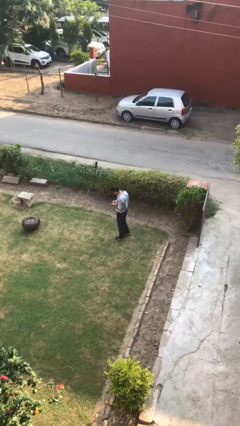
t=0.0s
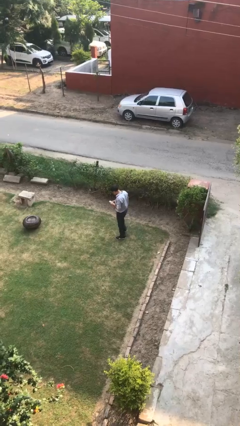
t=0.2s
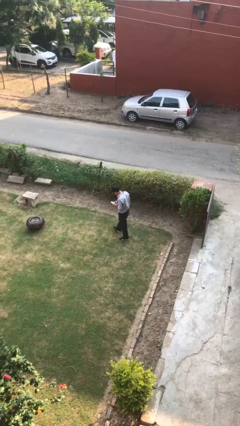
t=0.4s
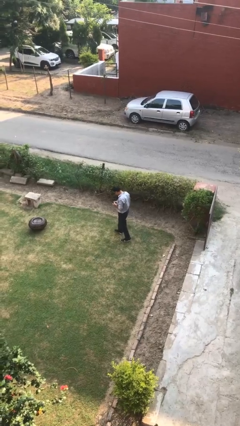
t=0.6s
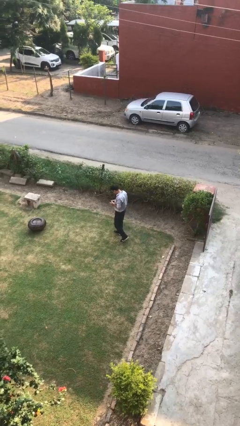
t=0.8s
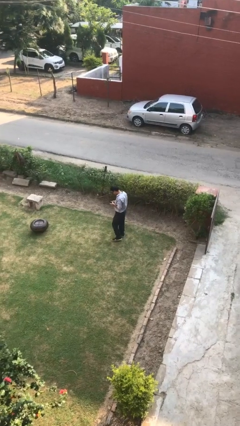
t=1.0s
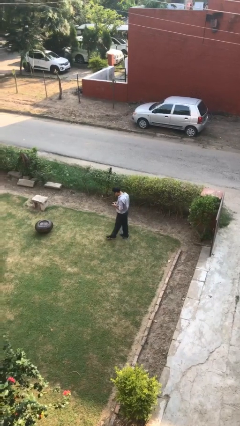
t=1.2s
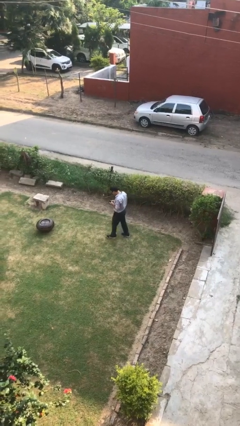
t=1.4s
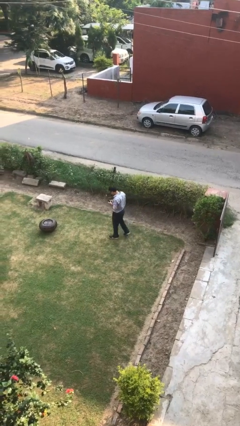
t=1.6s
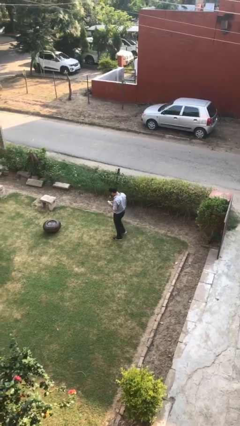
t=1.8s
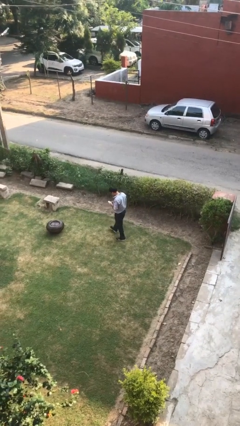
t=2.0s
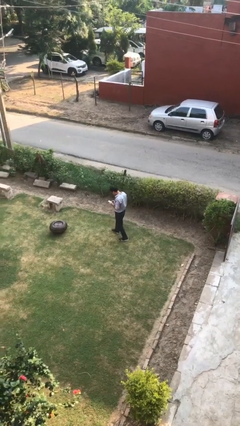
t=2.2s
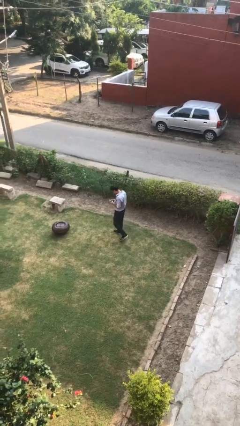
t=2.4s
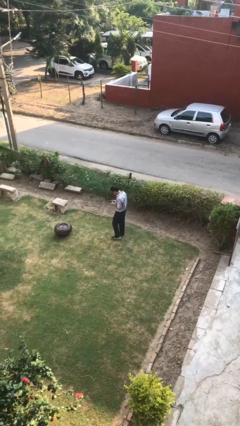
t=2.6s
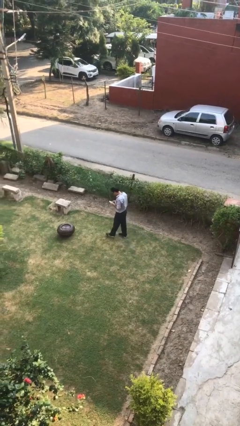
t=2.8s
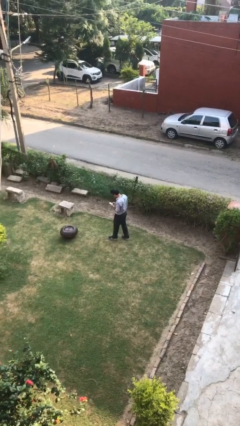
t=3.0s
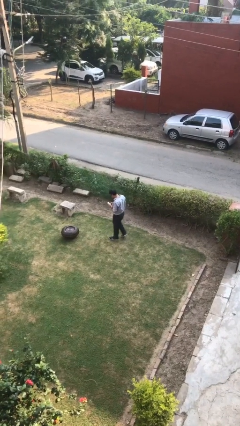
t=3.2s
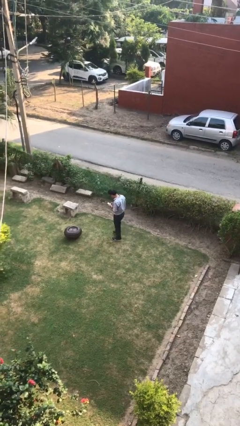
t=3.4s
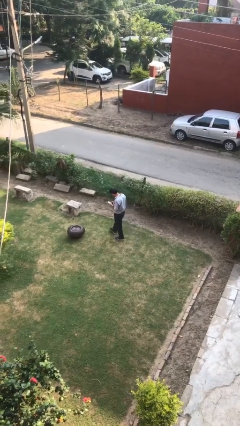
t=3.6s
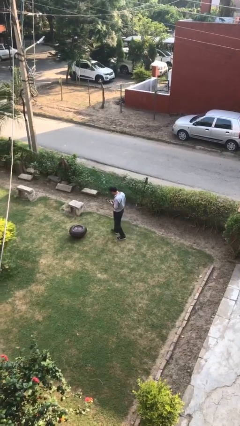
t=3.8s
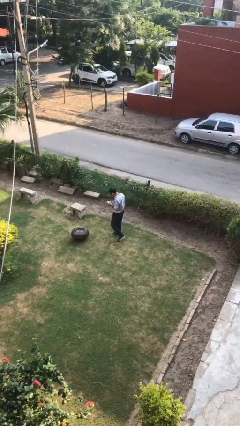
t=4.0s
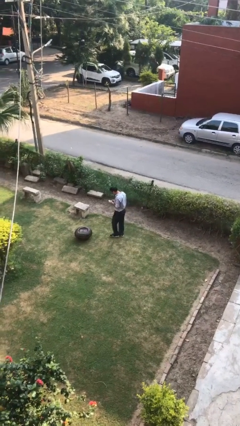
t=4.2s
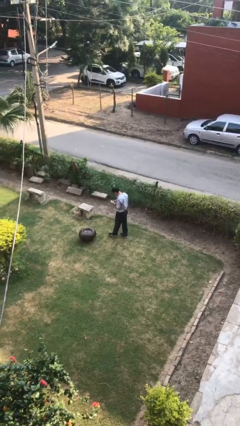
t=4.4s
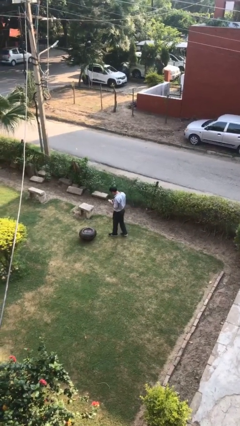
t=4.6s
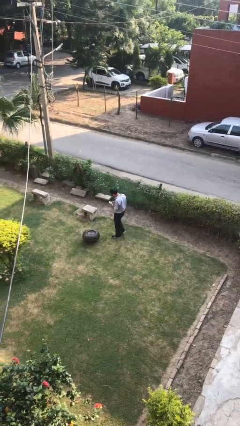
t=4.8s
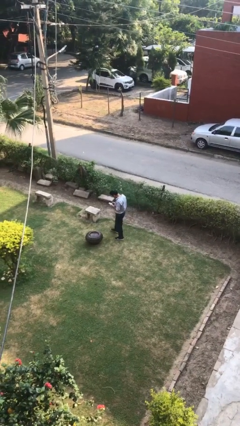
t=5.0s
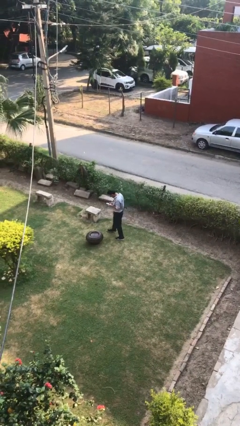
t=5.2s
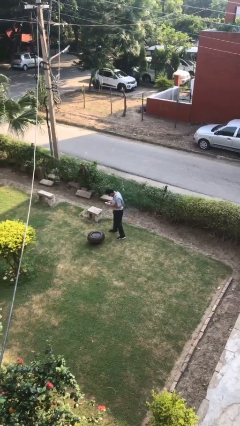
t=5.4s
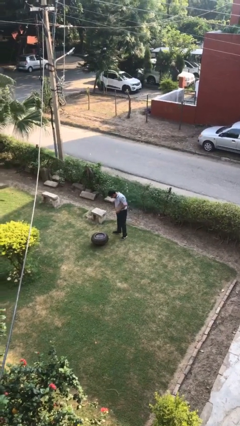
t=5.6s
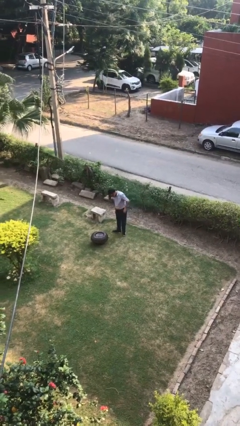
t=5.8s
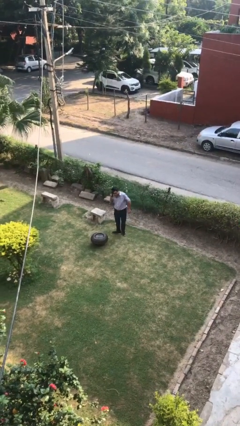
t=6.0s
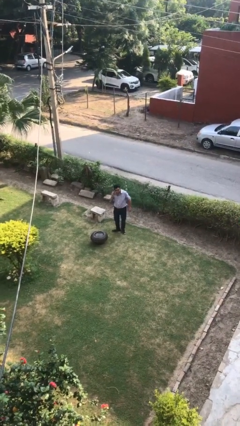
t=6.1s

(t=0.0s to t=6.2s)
person texts on phone

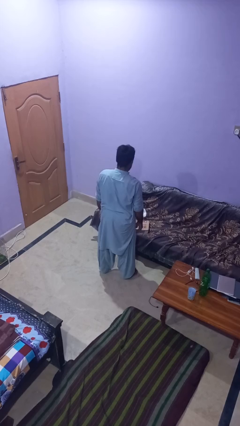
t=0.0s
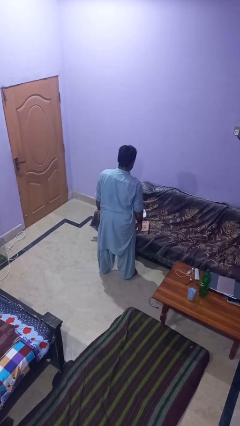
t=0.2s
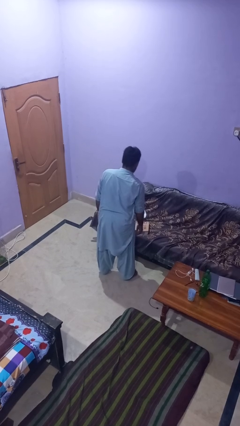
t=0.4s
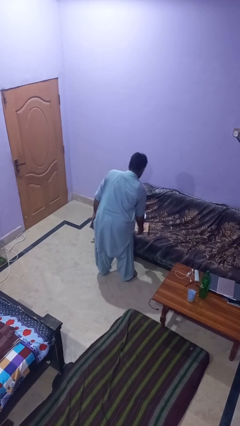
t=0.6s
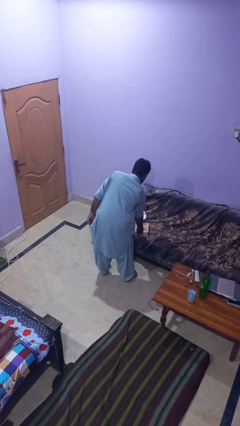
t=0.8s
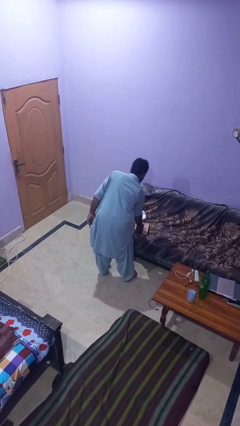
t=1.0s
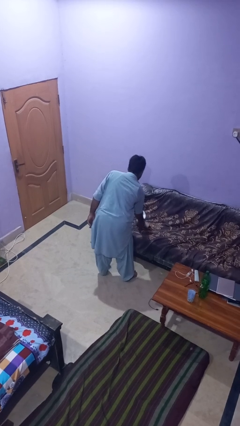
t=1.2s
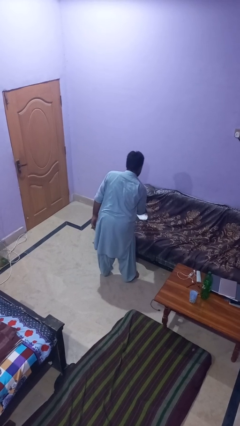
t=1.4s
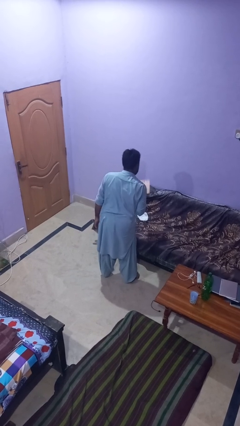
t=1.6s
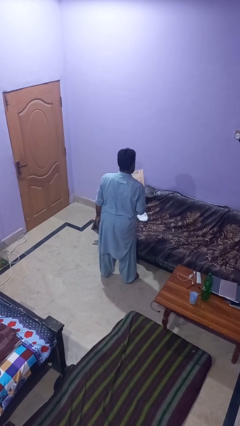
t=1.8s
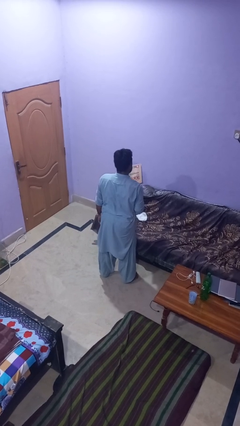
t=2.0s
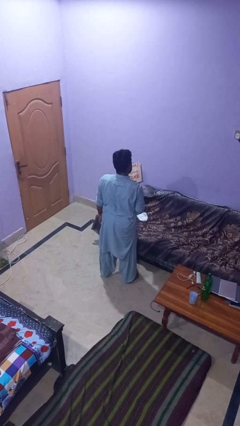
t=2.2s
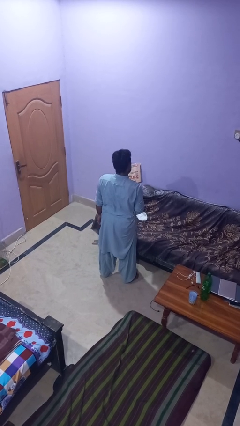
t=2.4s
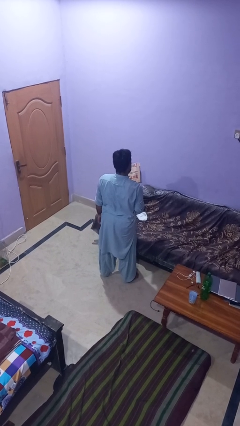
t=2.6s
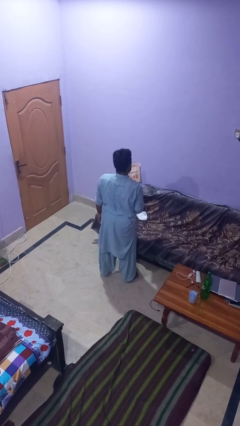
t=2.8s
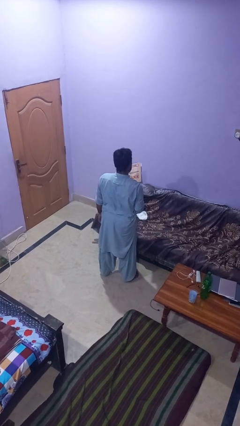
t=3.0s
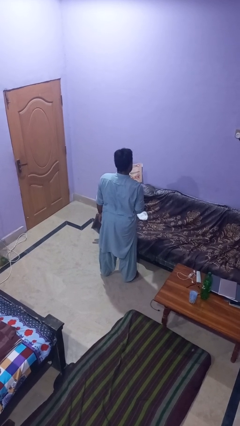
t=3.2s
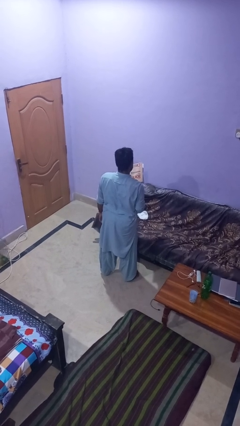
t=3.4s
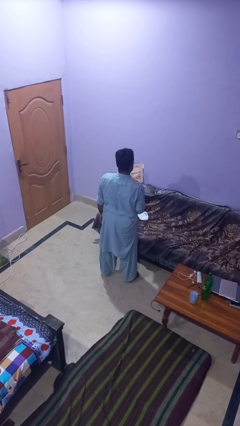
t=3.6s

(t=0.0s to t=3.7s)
person picks up object from couch

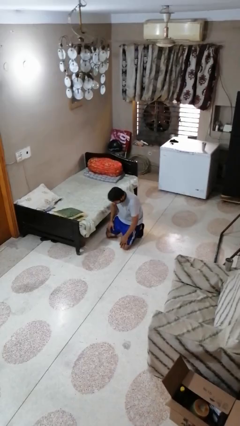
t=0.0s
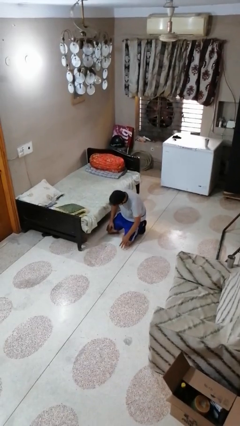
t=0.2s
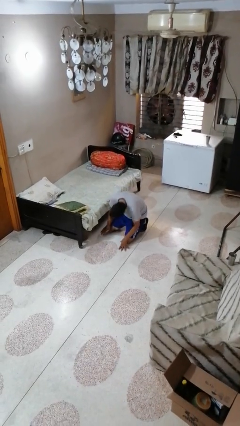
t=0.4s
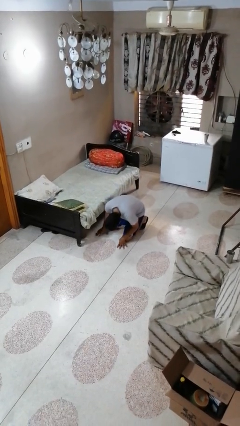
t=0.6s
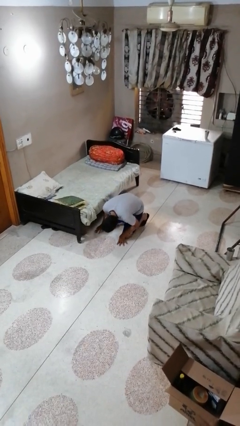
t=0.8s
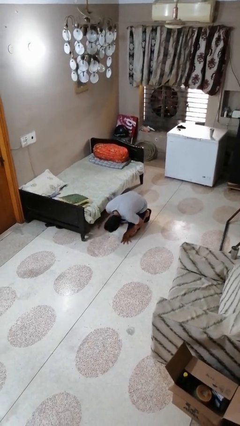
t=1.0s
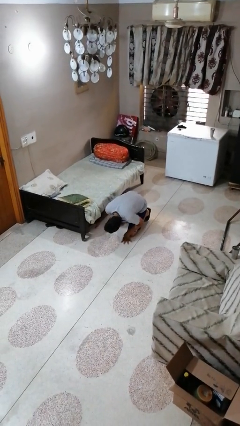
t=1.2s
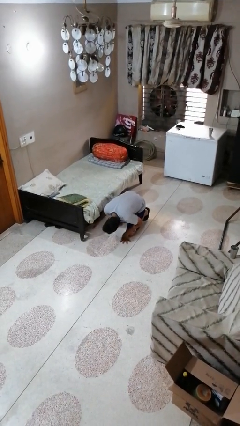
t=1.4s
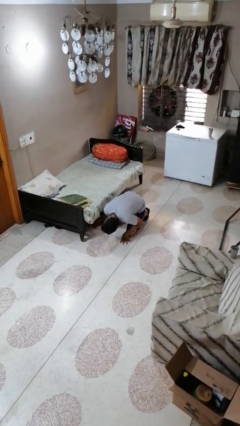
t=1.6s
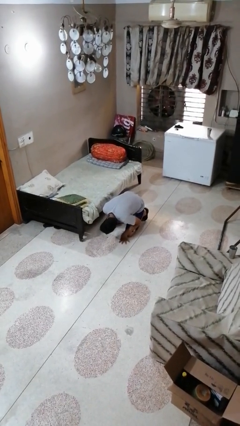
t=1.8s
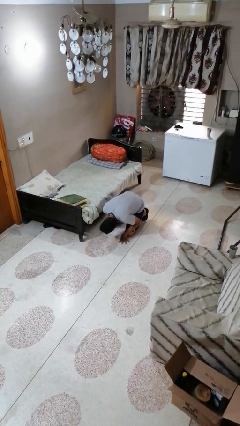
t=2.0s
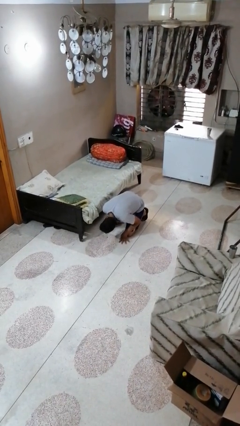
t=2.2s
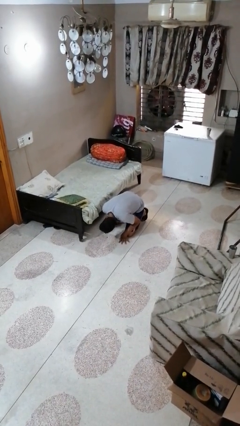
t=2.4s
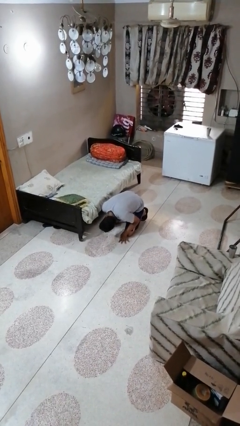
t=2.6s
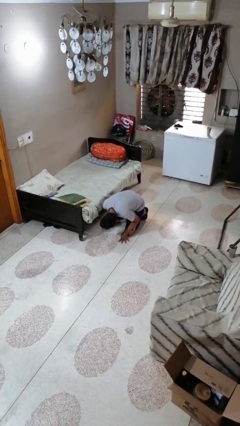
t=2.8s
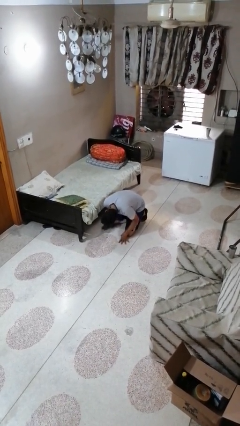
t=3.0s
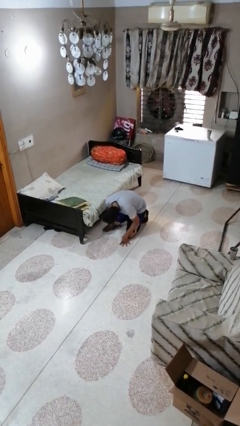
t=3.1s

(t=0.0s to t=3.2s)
person searches under bed

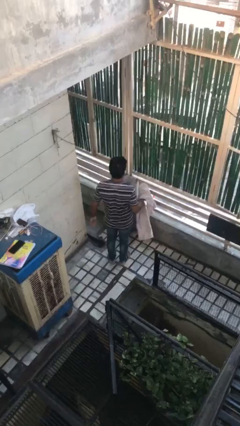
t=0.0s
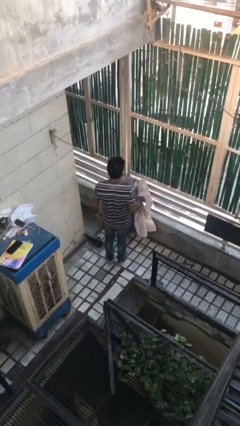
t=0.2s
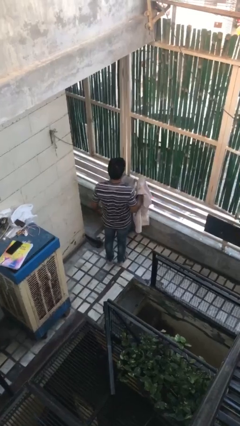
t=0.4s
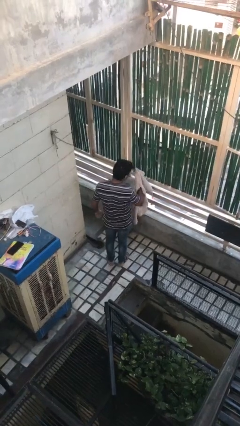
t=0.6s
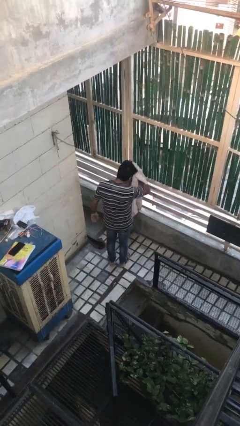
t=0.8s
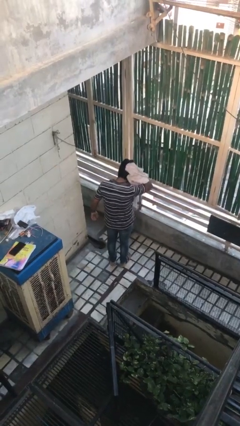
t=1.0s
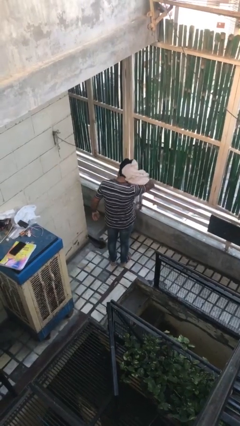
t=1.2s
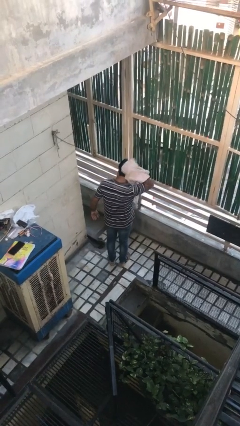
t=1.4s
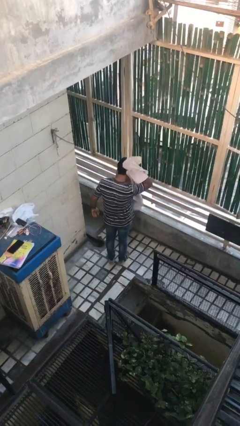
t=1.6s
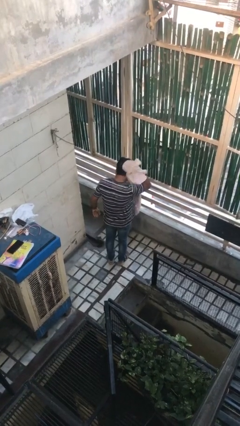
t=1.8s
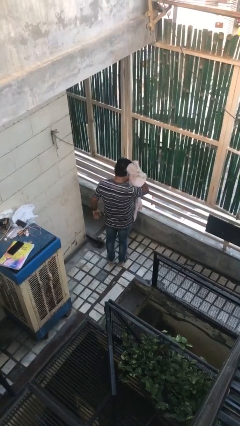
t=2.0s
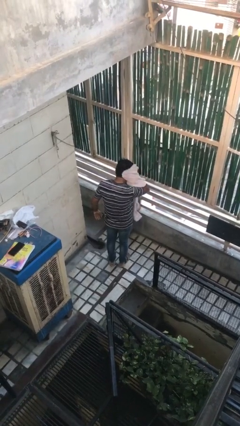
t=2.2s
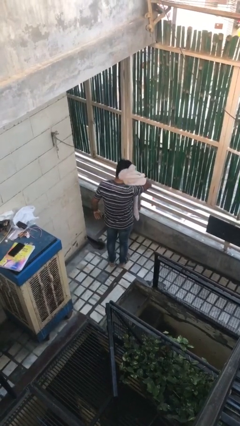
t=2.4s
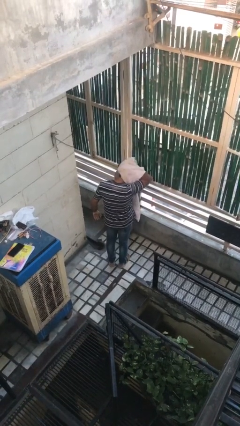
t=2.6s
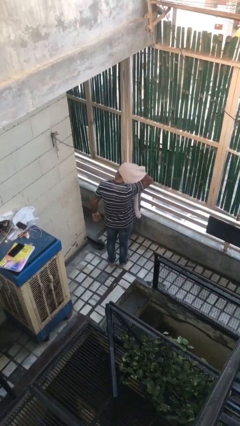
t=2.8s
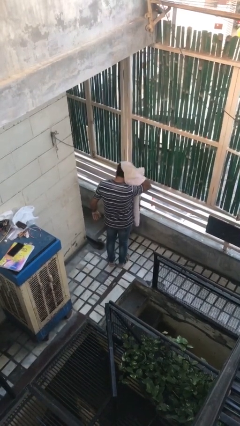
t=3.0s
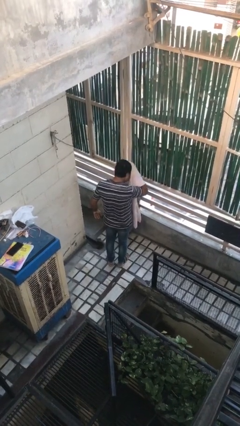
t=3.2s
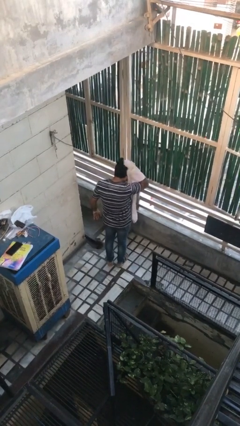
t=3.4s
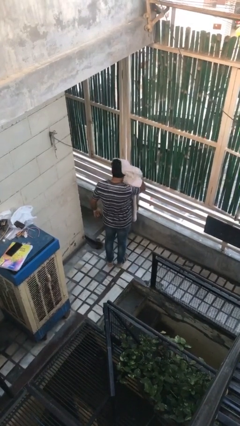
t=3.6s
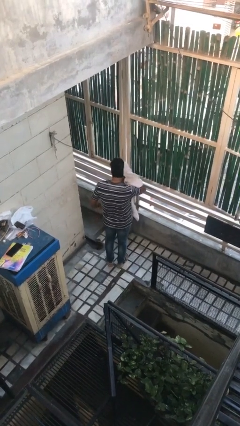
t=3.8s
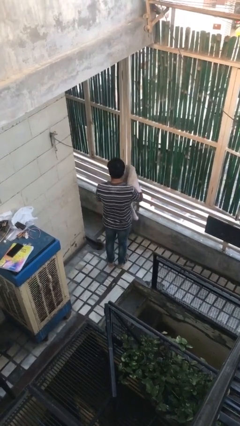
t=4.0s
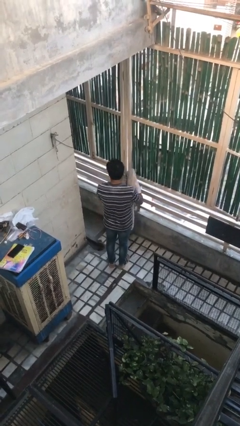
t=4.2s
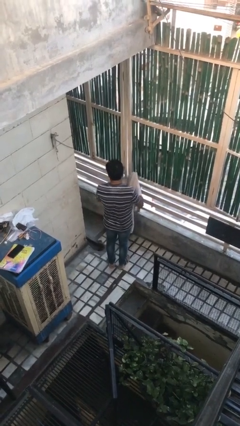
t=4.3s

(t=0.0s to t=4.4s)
person dries hair with towel
